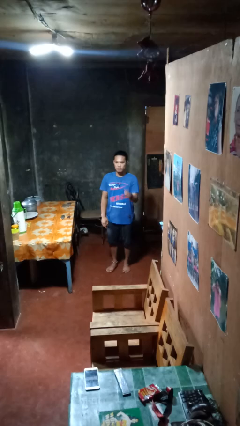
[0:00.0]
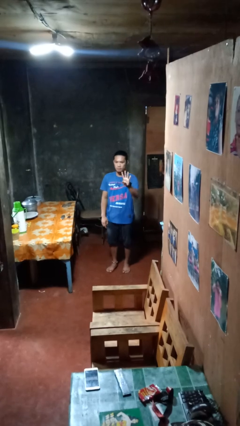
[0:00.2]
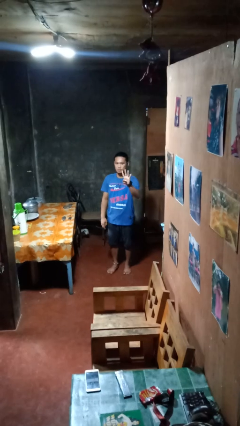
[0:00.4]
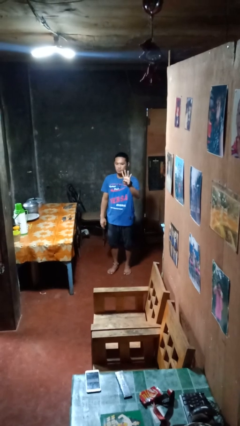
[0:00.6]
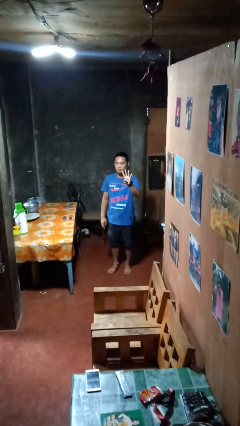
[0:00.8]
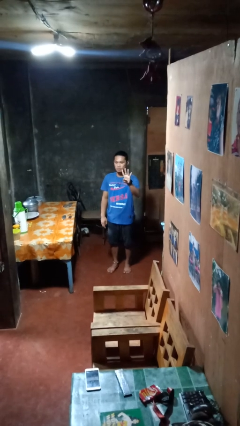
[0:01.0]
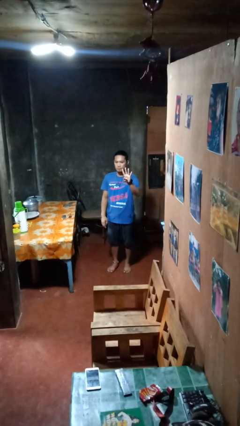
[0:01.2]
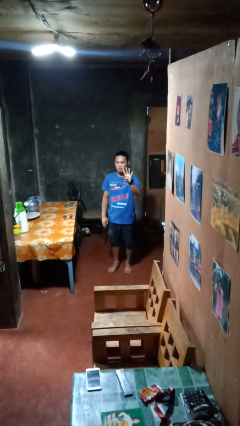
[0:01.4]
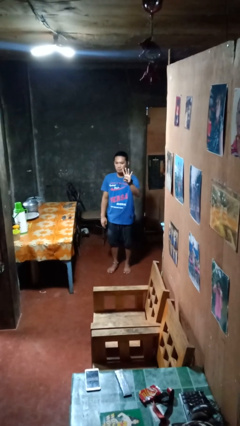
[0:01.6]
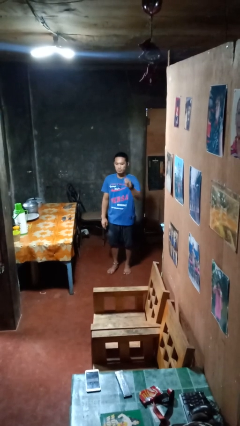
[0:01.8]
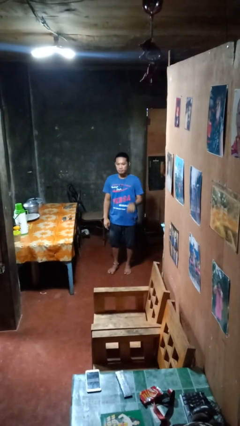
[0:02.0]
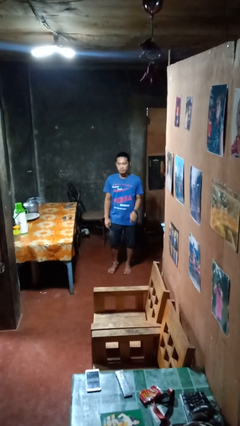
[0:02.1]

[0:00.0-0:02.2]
person gestures number four

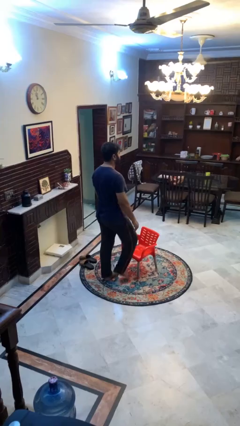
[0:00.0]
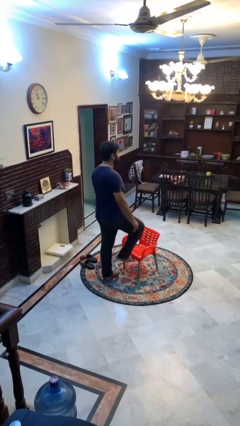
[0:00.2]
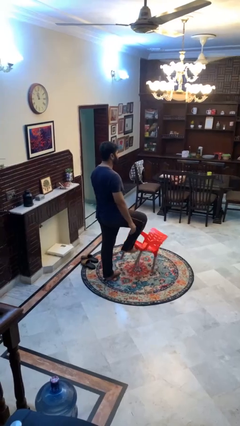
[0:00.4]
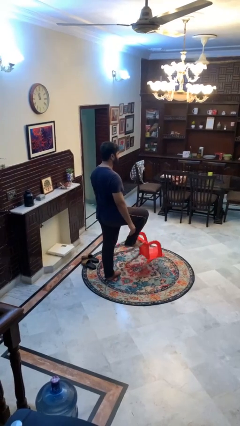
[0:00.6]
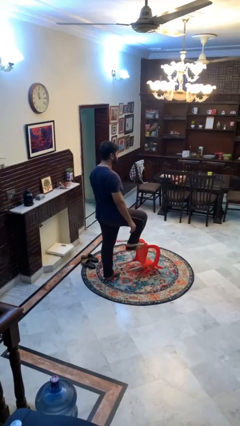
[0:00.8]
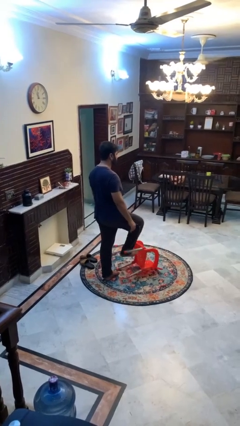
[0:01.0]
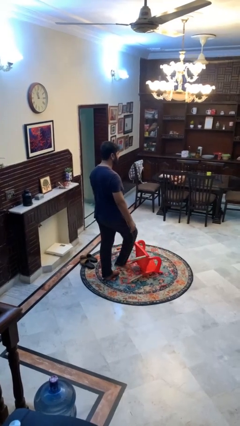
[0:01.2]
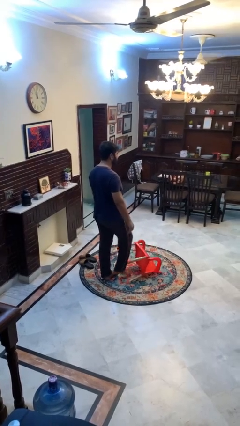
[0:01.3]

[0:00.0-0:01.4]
person knocks over furniture

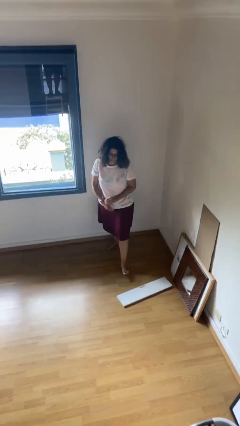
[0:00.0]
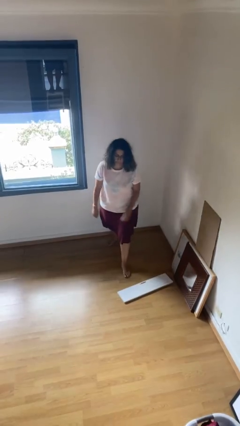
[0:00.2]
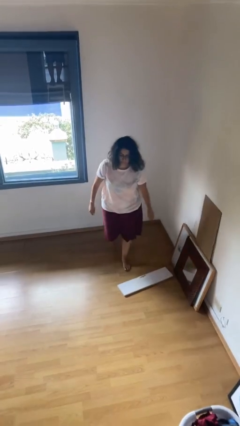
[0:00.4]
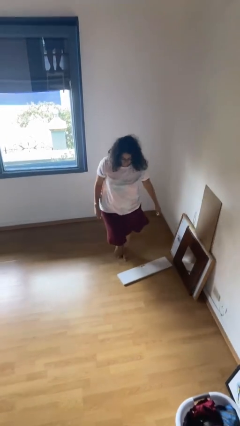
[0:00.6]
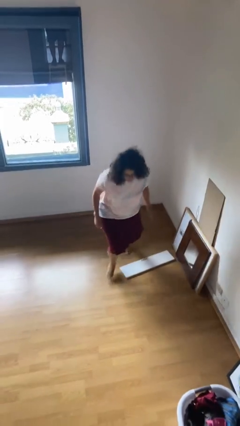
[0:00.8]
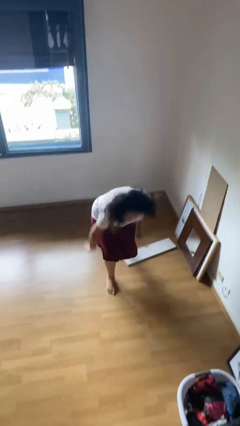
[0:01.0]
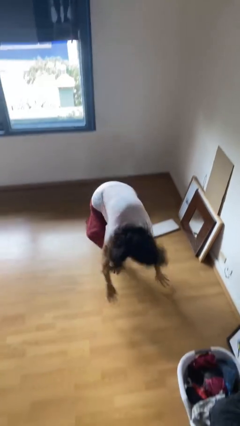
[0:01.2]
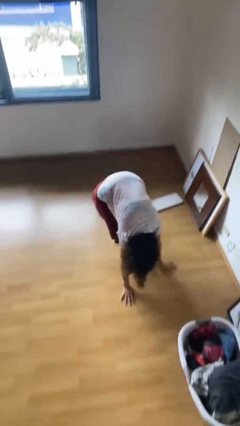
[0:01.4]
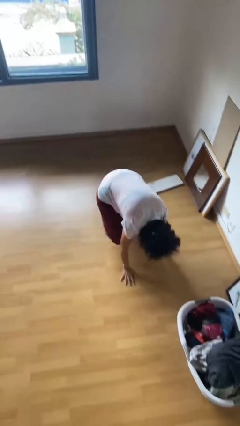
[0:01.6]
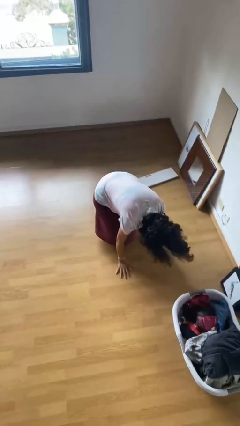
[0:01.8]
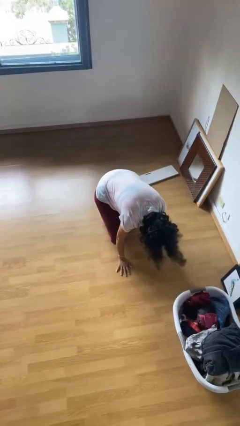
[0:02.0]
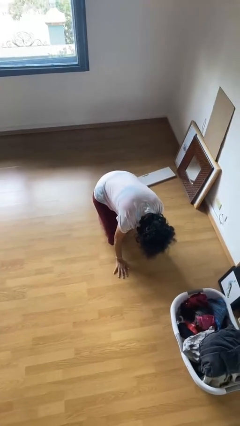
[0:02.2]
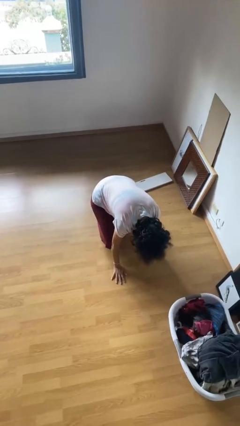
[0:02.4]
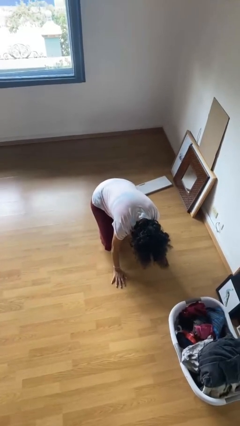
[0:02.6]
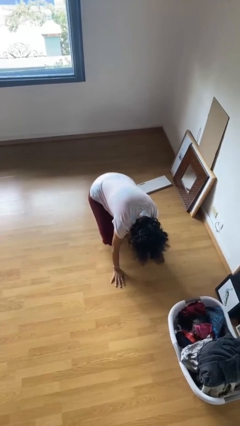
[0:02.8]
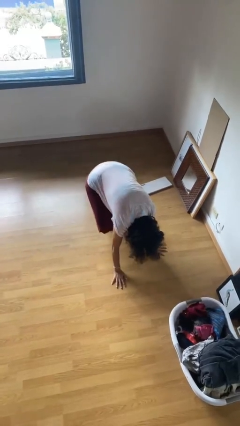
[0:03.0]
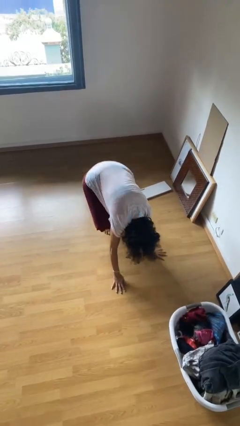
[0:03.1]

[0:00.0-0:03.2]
person trips on object on floor

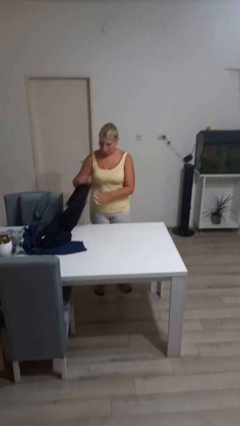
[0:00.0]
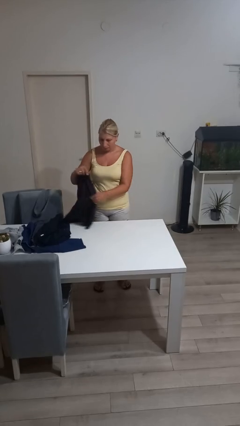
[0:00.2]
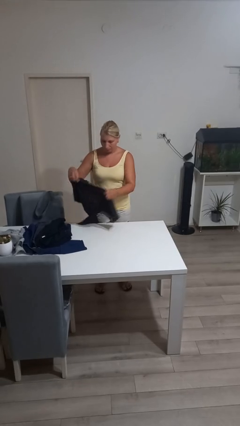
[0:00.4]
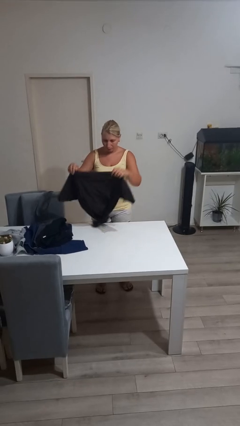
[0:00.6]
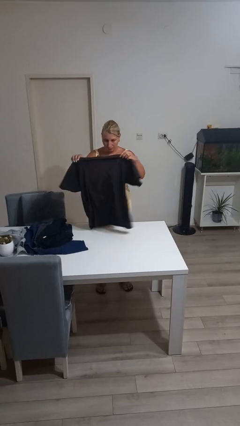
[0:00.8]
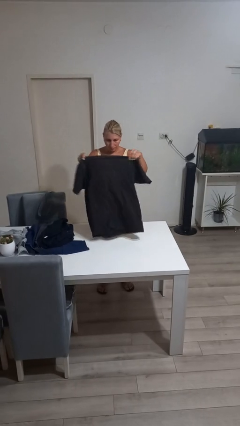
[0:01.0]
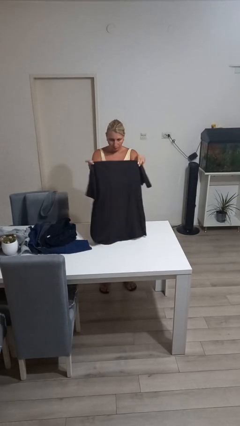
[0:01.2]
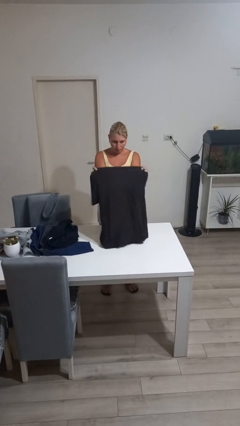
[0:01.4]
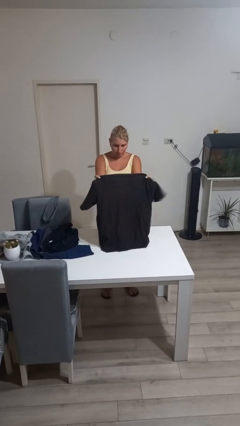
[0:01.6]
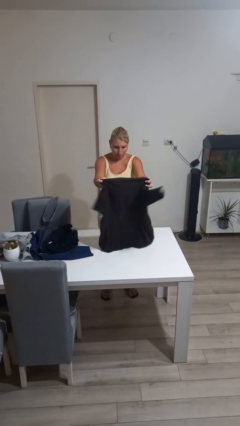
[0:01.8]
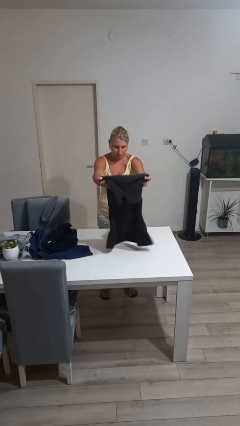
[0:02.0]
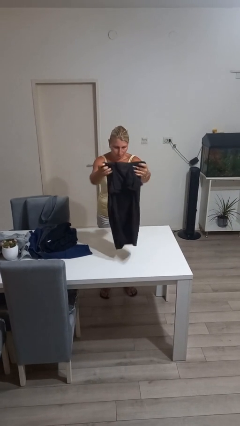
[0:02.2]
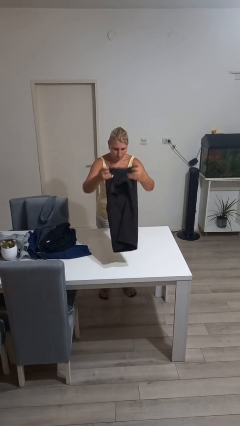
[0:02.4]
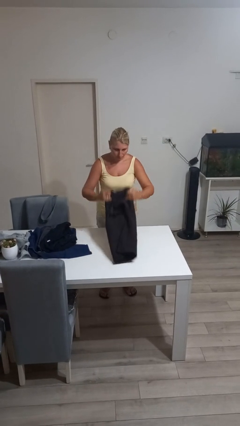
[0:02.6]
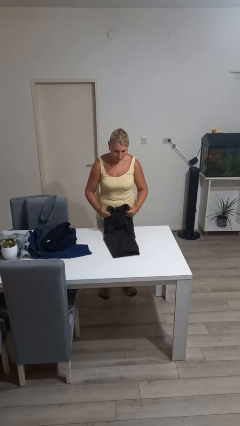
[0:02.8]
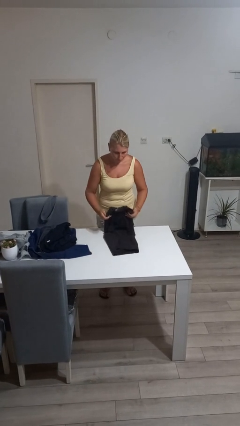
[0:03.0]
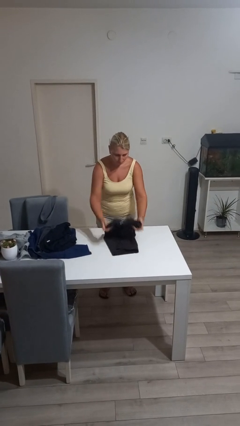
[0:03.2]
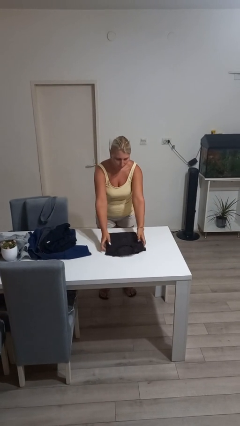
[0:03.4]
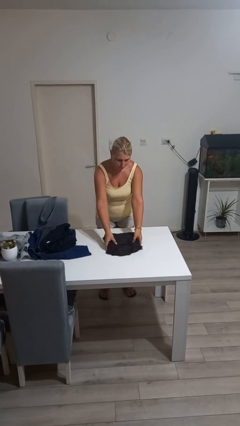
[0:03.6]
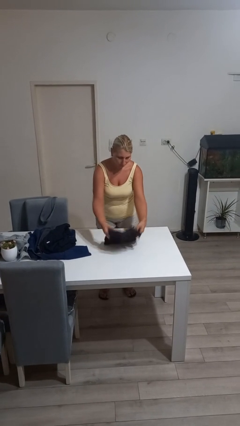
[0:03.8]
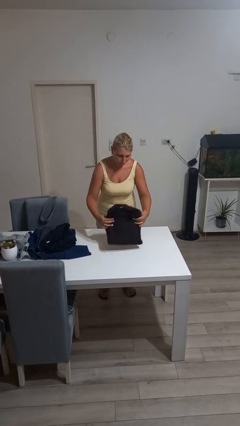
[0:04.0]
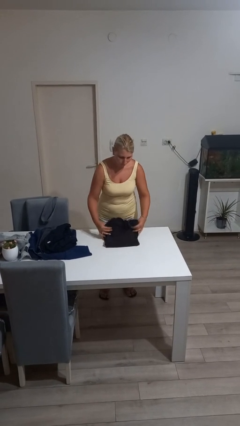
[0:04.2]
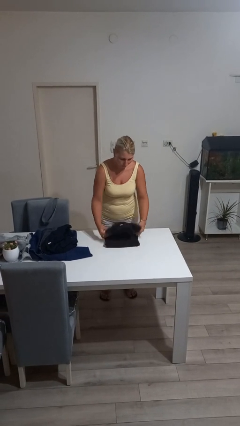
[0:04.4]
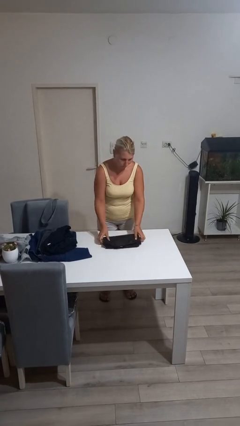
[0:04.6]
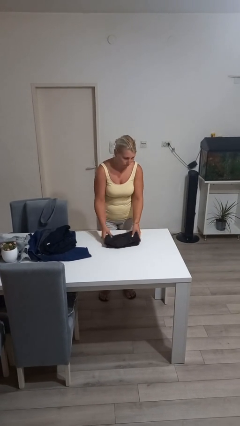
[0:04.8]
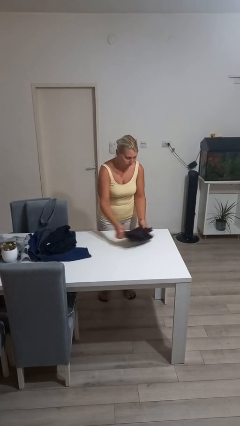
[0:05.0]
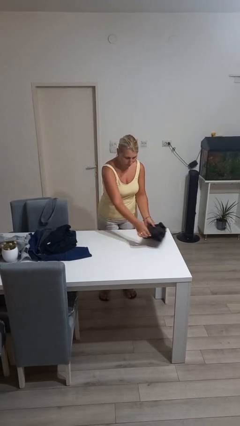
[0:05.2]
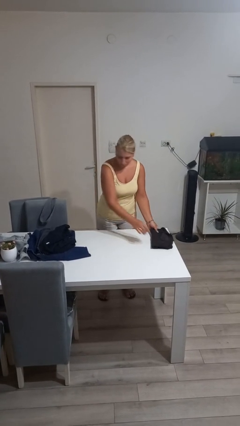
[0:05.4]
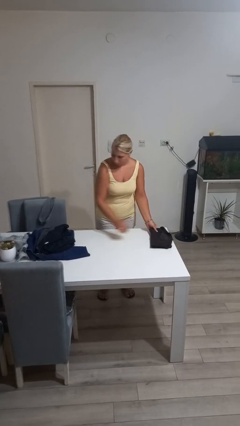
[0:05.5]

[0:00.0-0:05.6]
person folds shirt

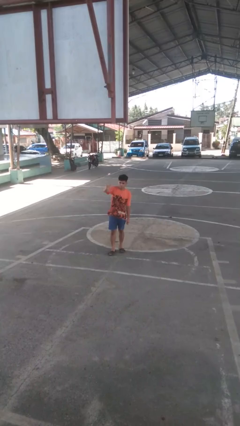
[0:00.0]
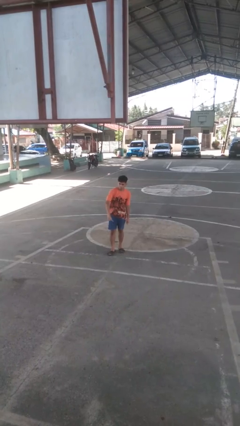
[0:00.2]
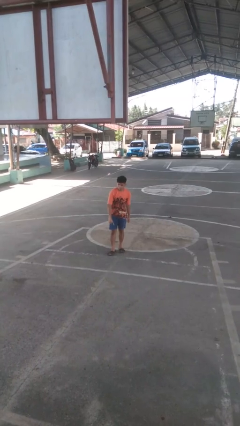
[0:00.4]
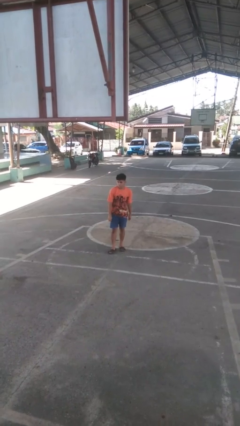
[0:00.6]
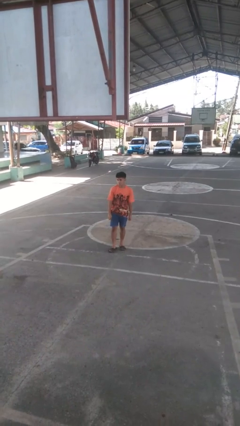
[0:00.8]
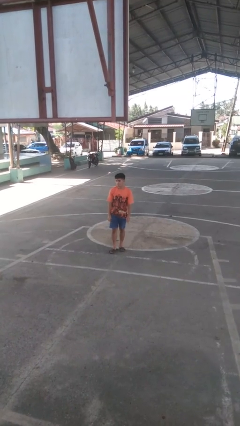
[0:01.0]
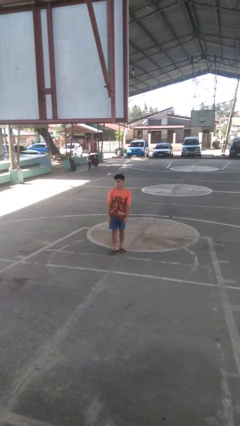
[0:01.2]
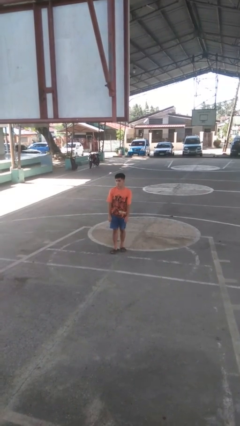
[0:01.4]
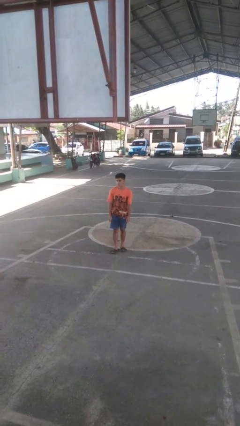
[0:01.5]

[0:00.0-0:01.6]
person gestures swipe down

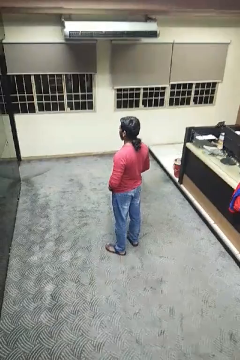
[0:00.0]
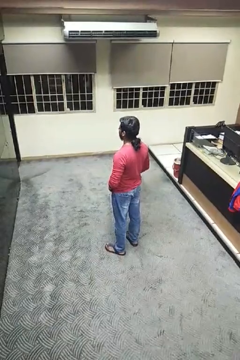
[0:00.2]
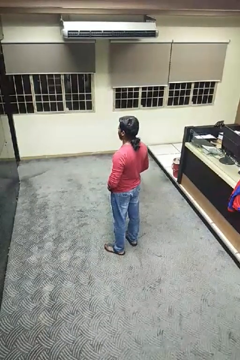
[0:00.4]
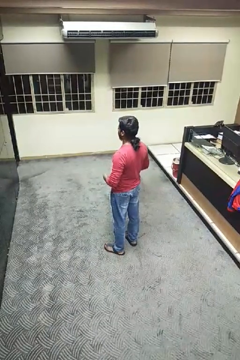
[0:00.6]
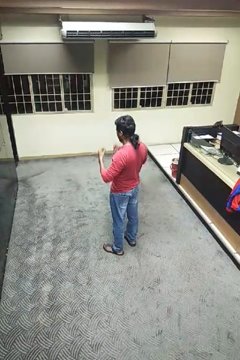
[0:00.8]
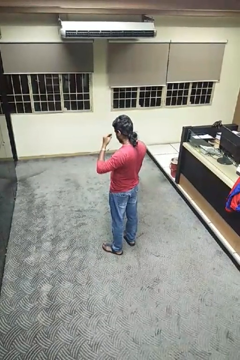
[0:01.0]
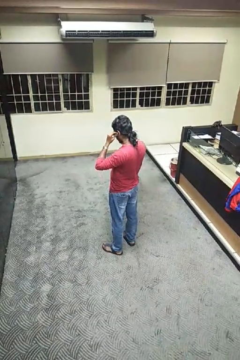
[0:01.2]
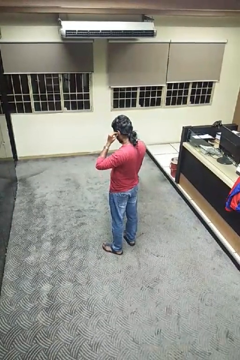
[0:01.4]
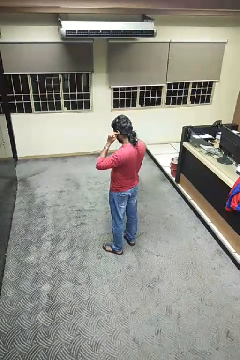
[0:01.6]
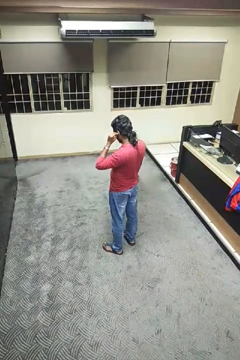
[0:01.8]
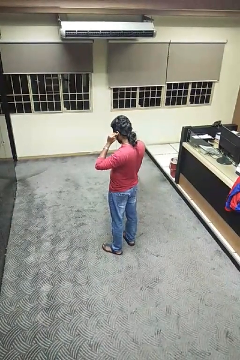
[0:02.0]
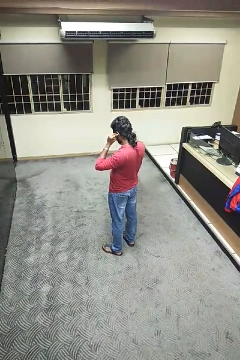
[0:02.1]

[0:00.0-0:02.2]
person puts on headphones

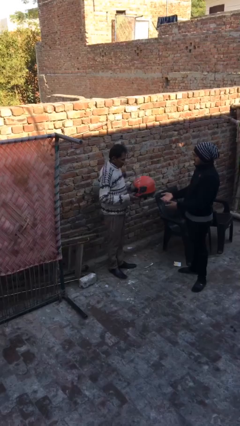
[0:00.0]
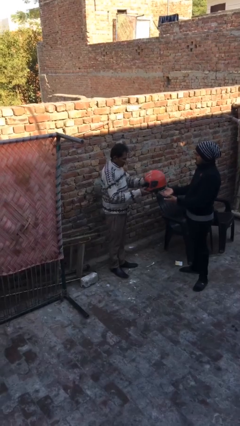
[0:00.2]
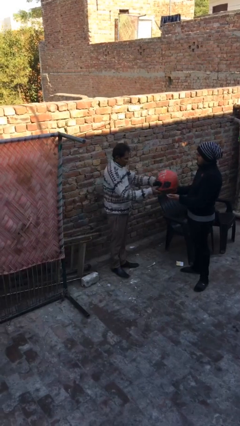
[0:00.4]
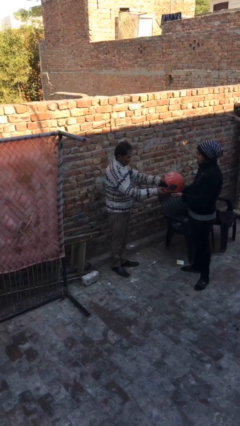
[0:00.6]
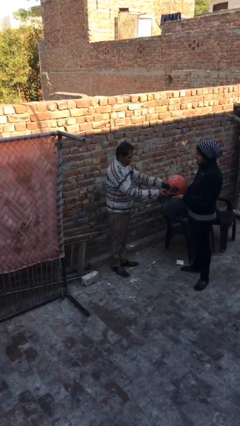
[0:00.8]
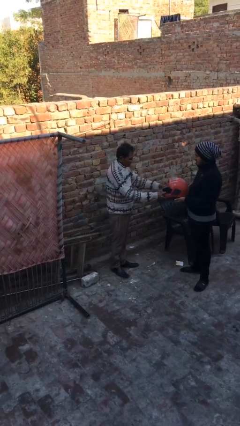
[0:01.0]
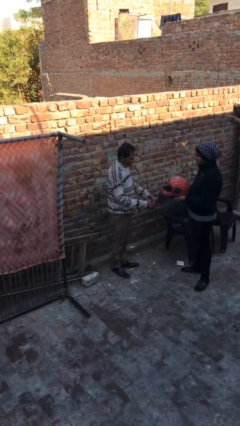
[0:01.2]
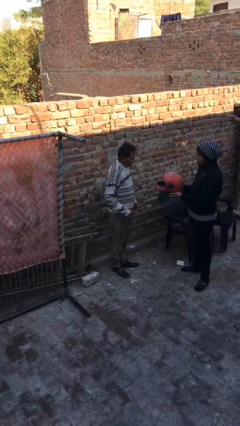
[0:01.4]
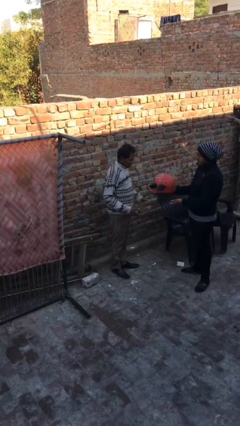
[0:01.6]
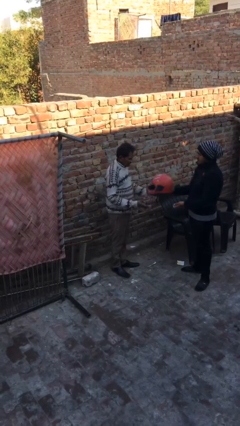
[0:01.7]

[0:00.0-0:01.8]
person transfers object to person
